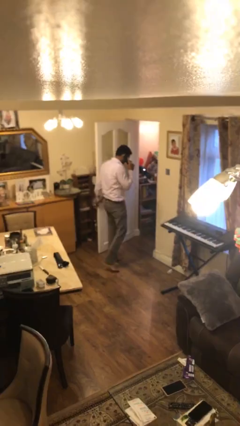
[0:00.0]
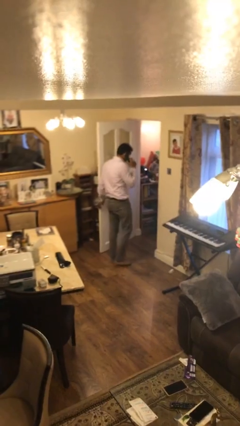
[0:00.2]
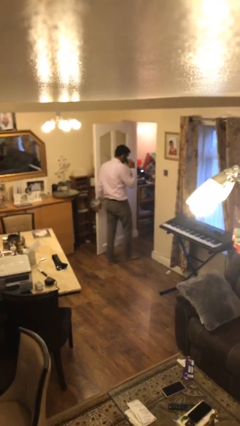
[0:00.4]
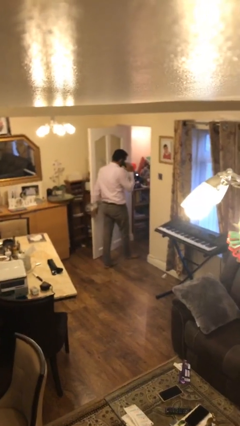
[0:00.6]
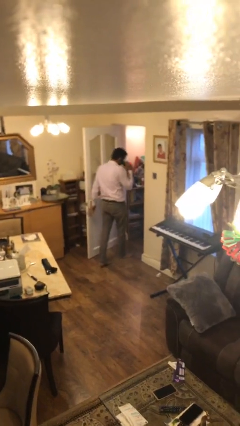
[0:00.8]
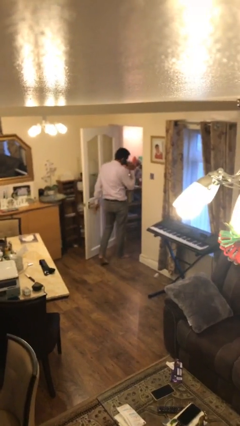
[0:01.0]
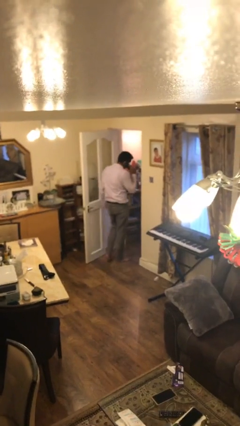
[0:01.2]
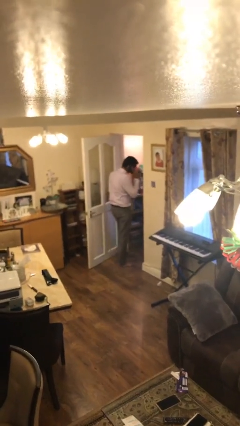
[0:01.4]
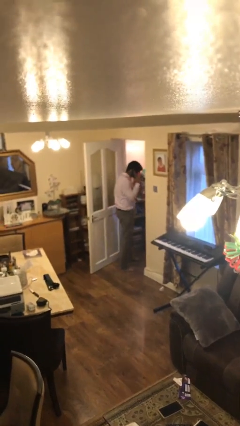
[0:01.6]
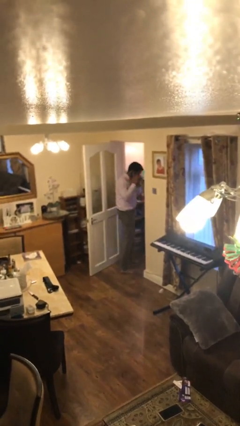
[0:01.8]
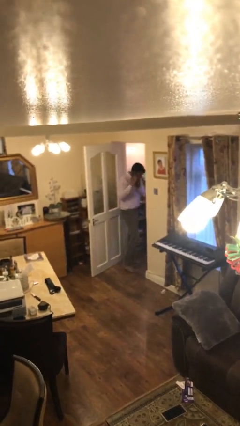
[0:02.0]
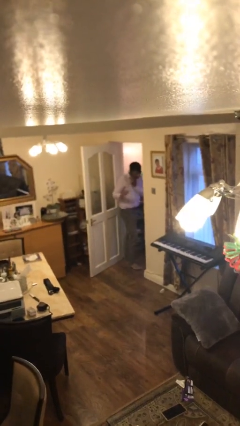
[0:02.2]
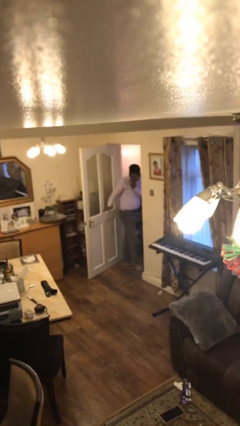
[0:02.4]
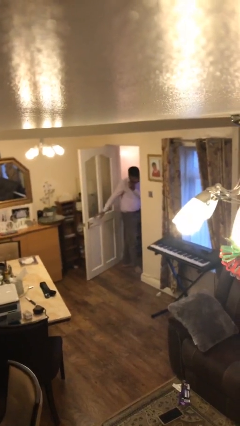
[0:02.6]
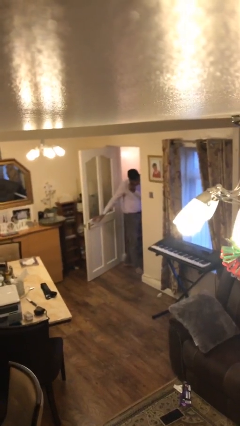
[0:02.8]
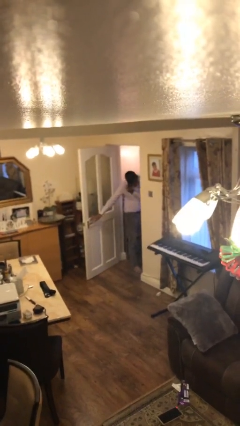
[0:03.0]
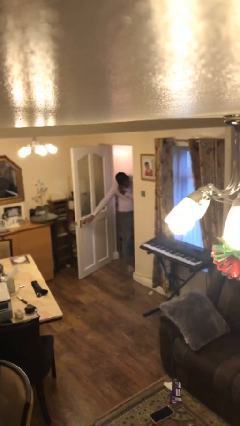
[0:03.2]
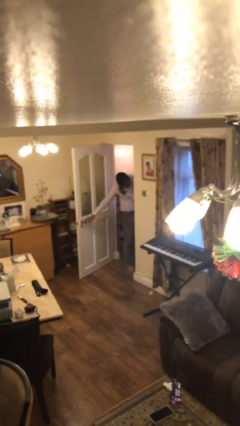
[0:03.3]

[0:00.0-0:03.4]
person exits scene through structure

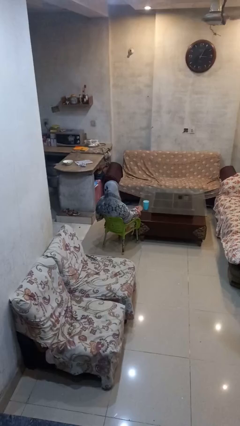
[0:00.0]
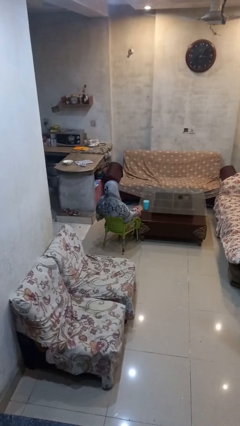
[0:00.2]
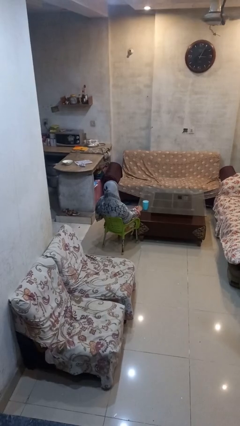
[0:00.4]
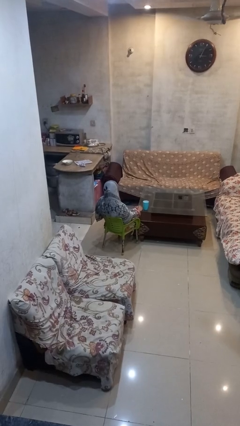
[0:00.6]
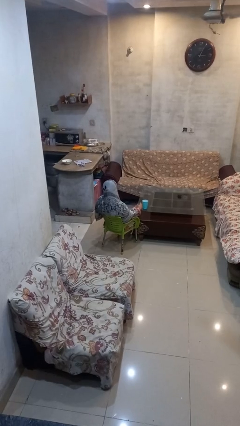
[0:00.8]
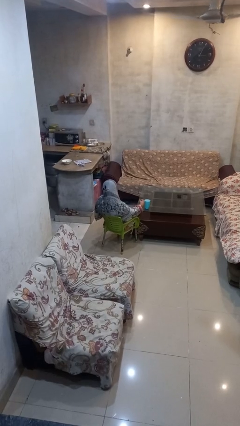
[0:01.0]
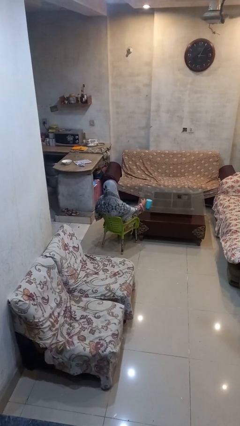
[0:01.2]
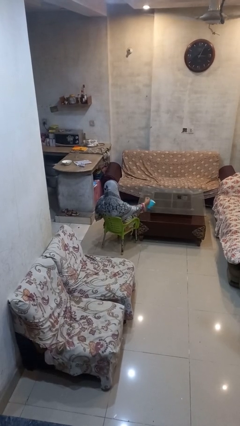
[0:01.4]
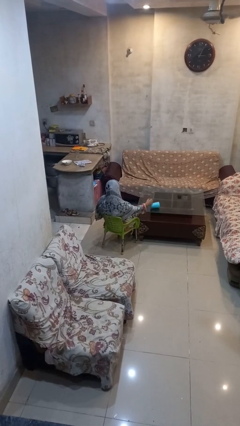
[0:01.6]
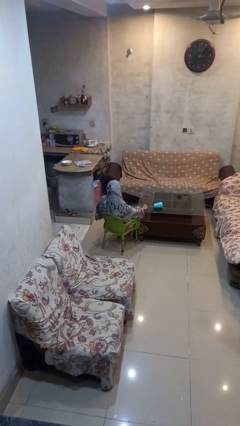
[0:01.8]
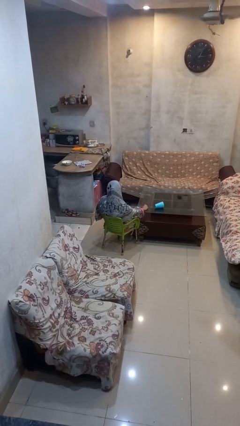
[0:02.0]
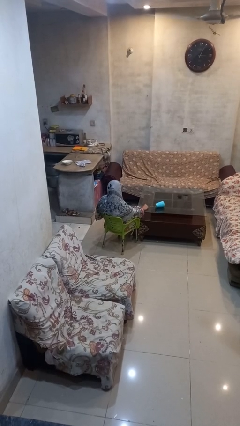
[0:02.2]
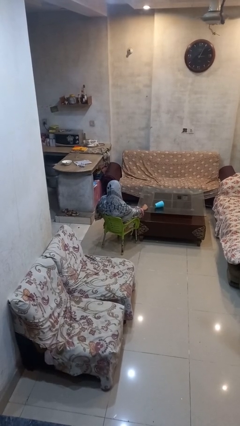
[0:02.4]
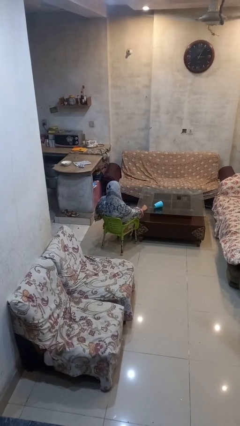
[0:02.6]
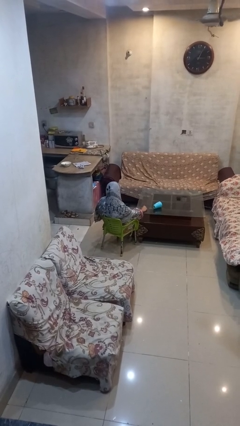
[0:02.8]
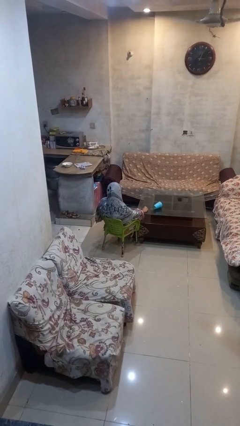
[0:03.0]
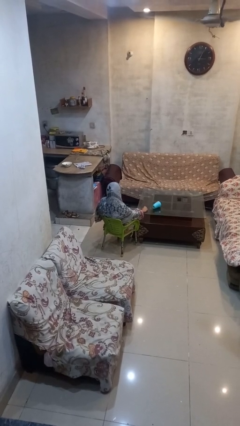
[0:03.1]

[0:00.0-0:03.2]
person knocks over glass

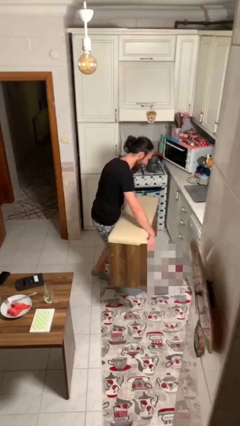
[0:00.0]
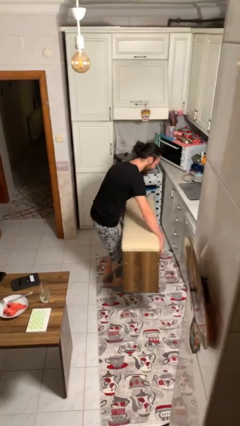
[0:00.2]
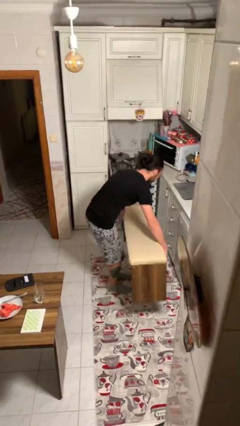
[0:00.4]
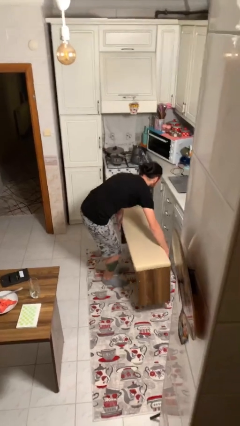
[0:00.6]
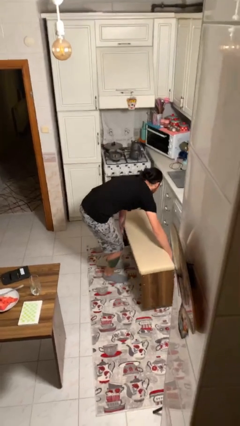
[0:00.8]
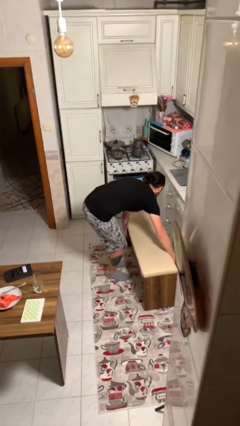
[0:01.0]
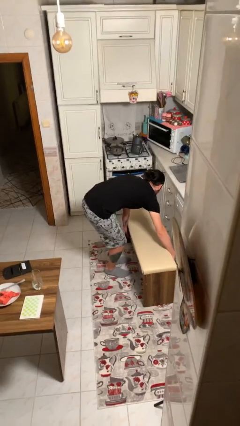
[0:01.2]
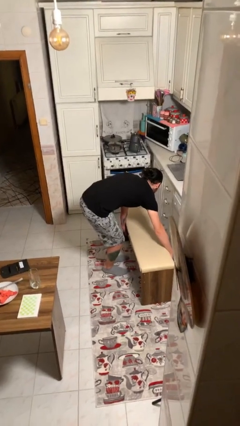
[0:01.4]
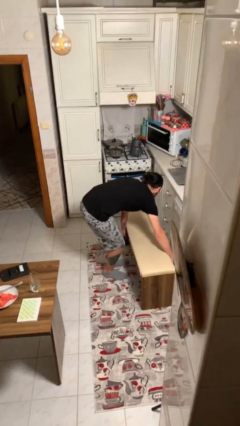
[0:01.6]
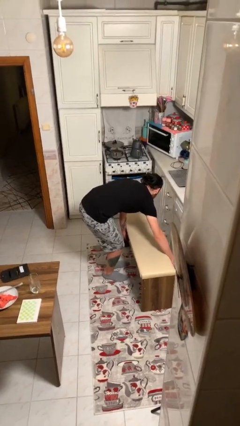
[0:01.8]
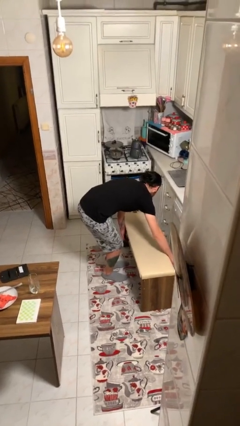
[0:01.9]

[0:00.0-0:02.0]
person puts down object on floor

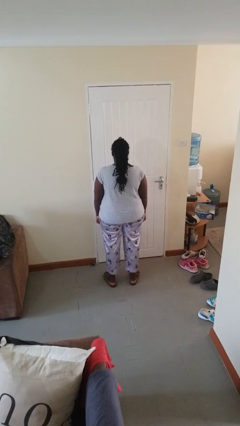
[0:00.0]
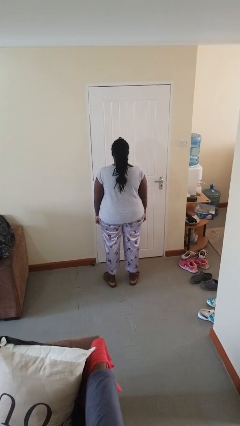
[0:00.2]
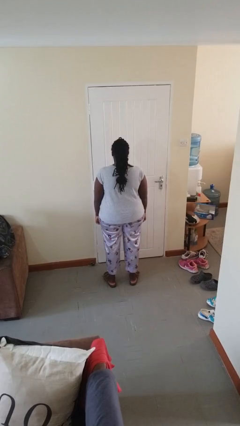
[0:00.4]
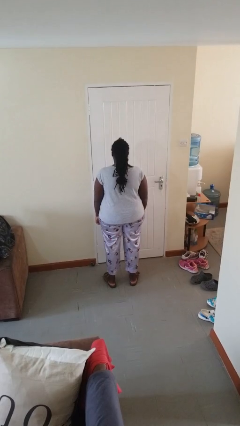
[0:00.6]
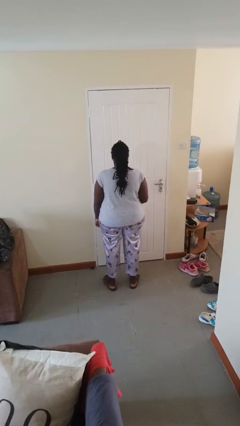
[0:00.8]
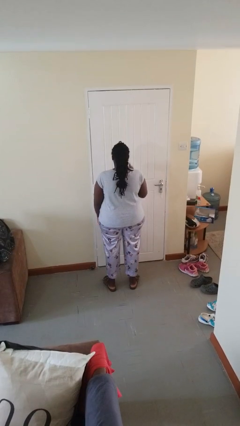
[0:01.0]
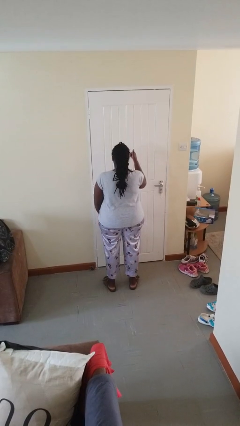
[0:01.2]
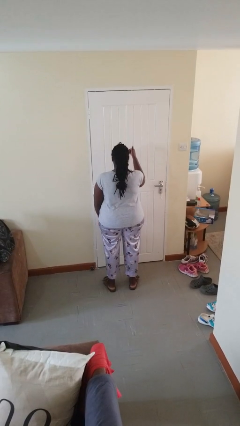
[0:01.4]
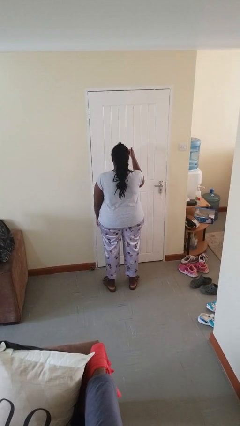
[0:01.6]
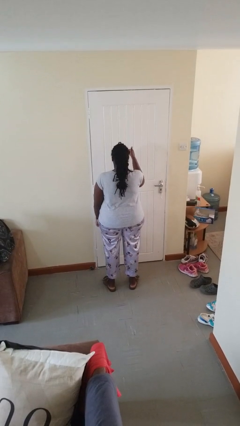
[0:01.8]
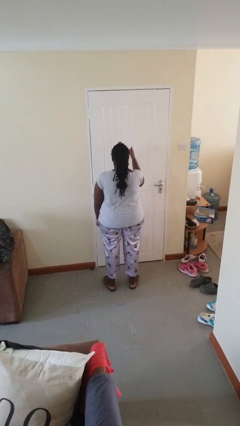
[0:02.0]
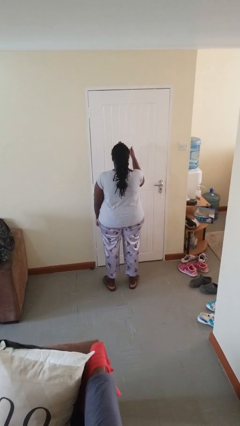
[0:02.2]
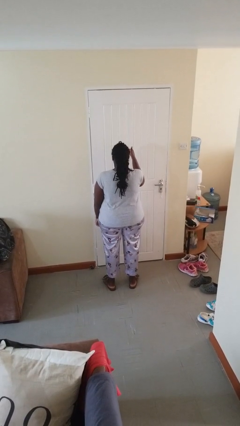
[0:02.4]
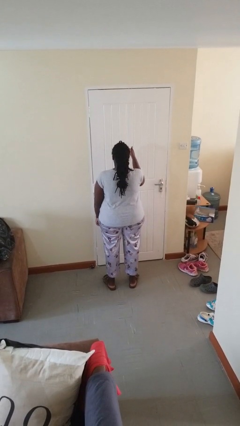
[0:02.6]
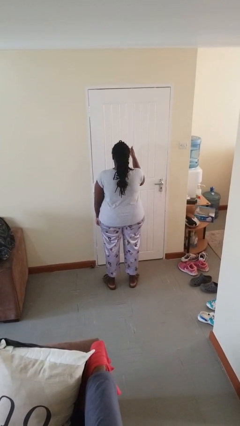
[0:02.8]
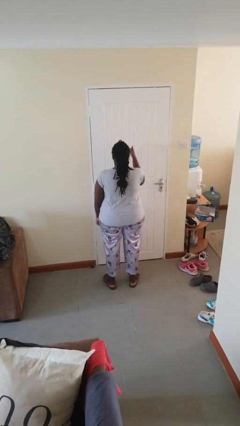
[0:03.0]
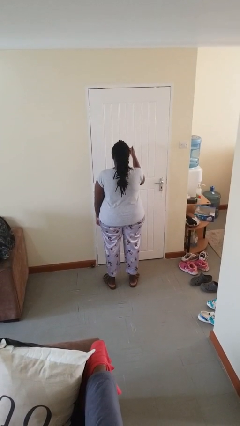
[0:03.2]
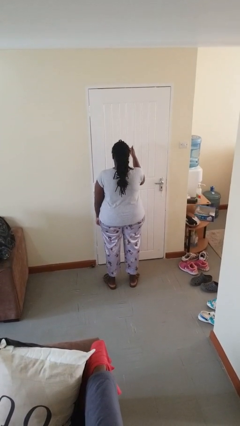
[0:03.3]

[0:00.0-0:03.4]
person gestures thumbs up

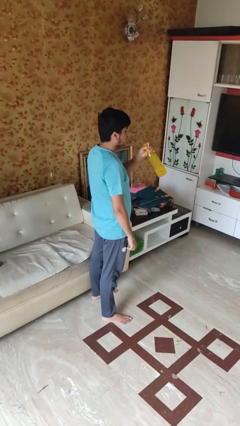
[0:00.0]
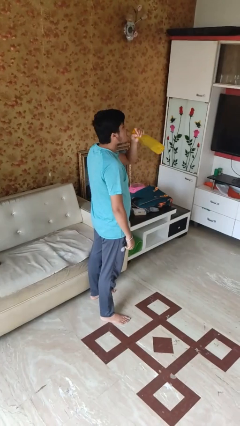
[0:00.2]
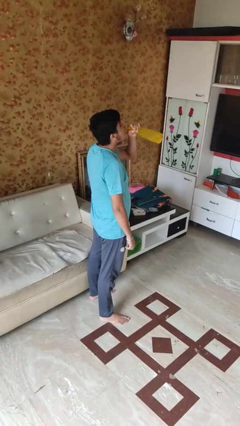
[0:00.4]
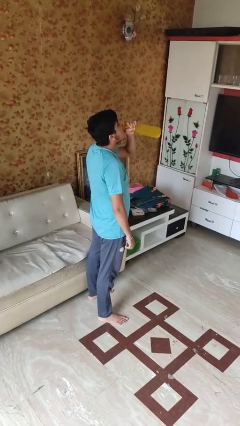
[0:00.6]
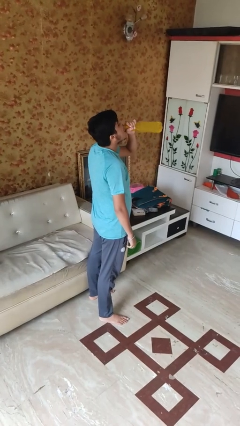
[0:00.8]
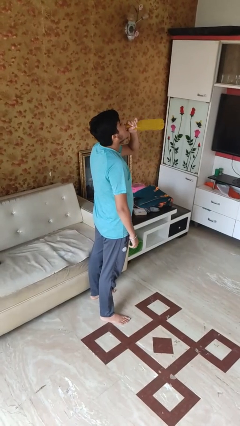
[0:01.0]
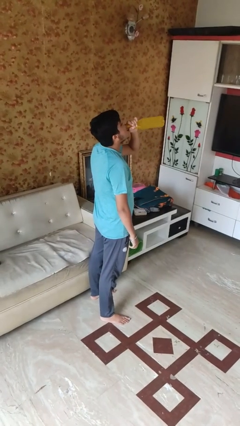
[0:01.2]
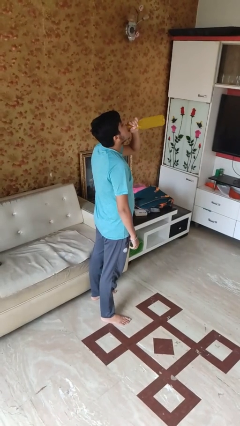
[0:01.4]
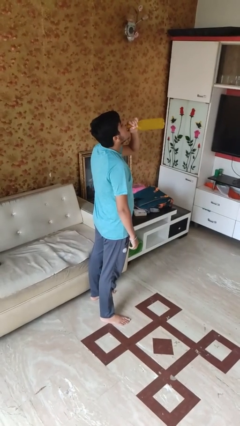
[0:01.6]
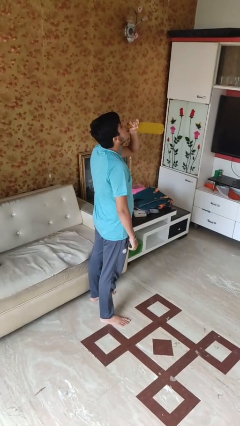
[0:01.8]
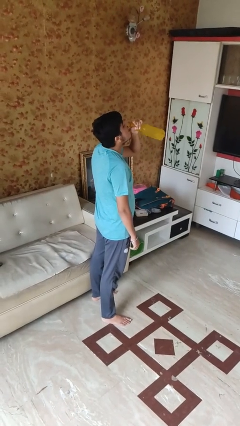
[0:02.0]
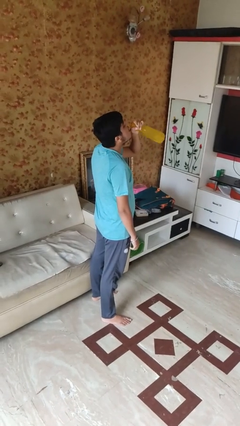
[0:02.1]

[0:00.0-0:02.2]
person drinks from bottle

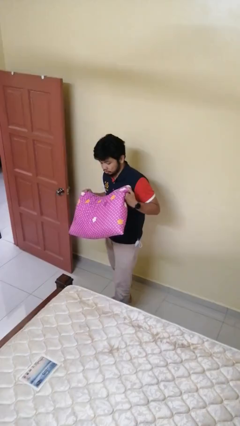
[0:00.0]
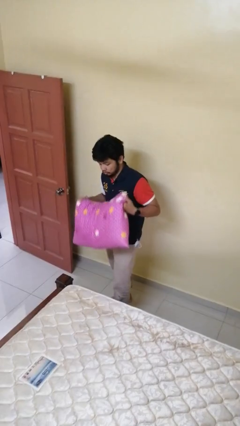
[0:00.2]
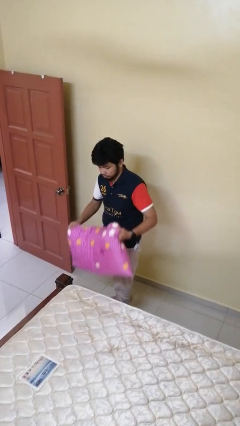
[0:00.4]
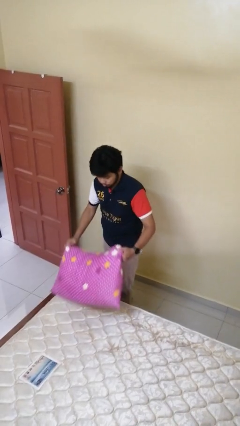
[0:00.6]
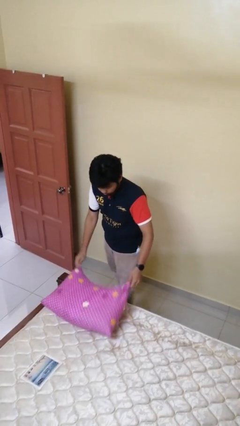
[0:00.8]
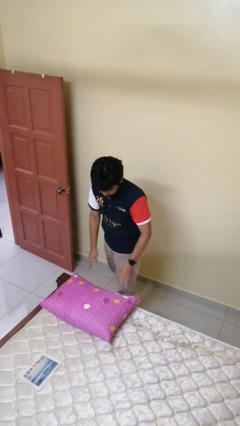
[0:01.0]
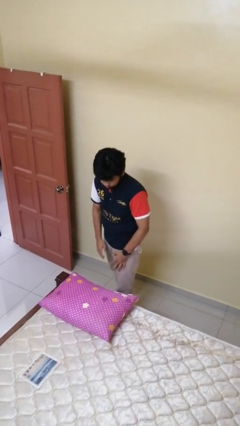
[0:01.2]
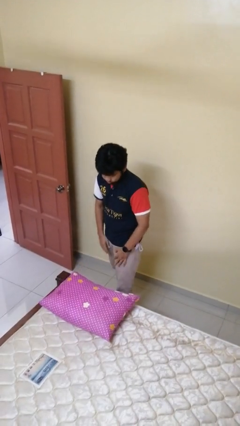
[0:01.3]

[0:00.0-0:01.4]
person puts down object on bed

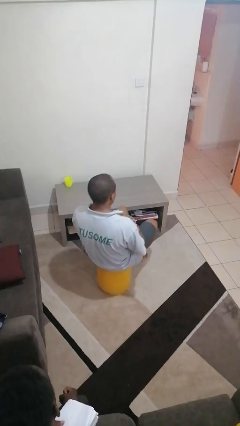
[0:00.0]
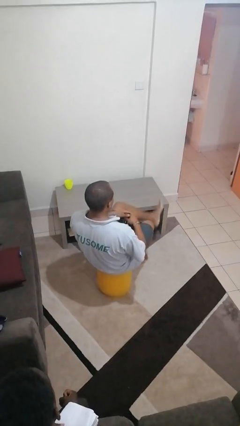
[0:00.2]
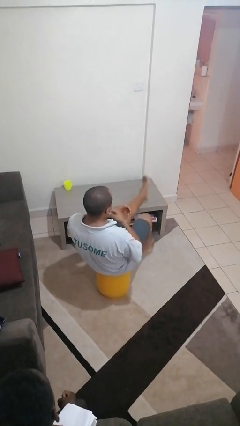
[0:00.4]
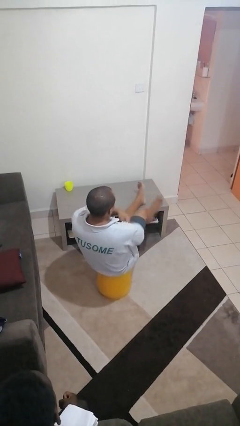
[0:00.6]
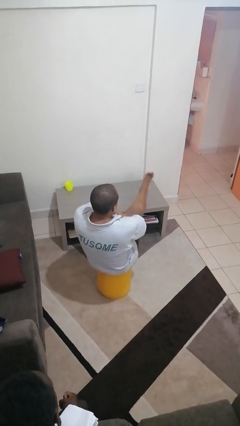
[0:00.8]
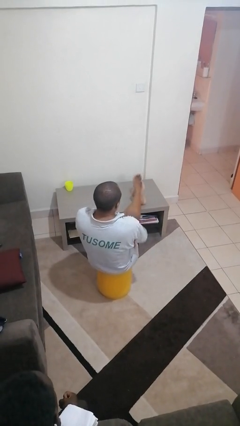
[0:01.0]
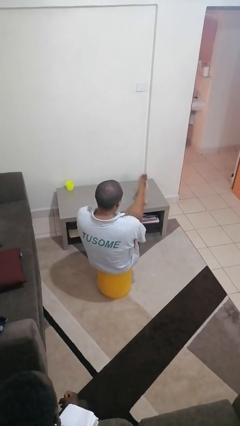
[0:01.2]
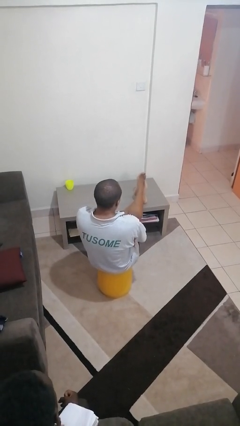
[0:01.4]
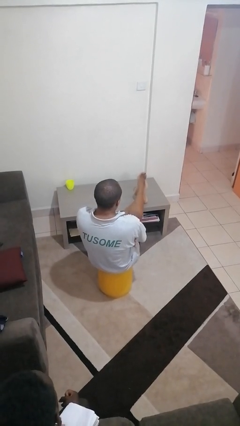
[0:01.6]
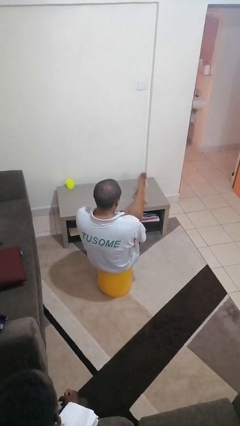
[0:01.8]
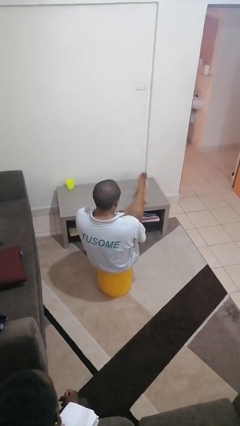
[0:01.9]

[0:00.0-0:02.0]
person puts feet up
